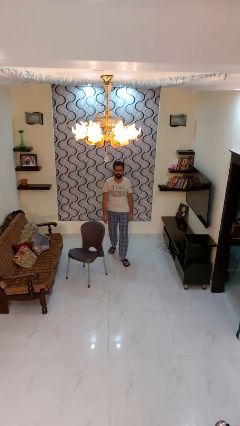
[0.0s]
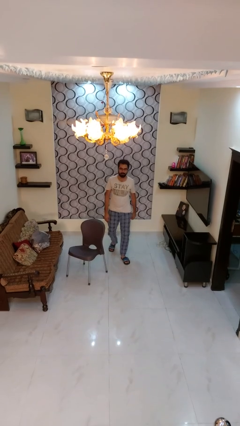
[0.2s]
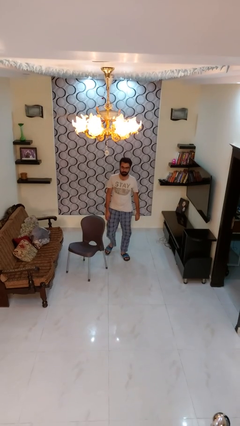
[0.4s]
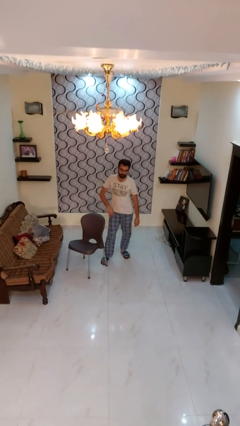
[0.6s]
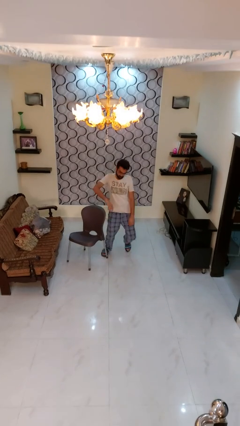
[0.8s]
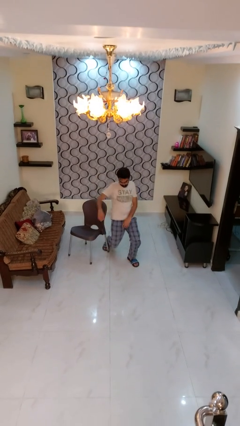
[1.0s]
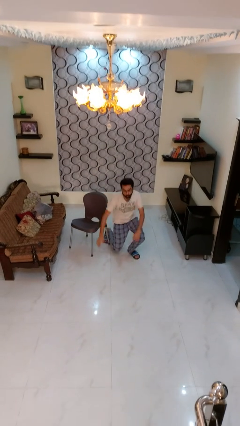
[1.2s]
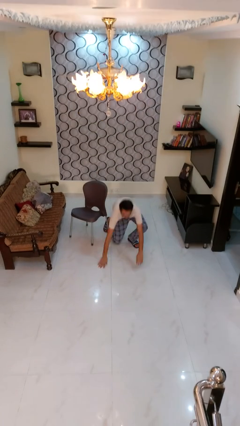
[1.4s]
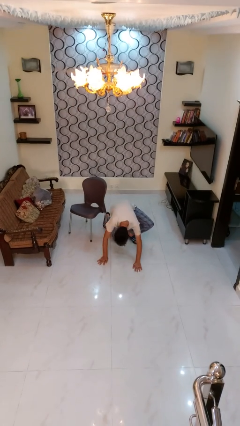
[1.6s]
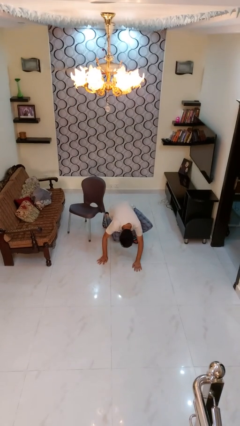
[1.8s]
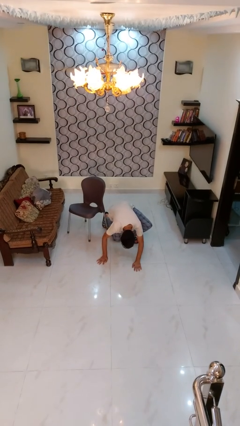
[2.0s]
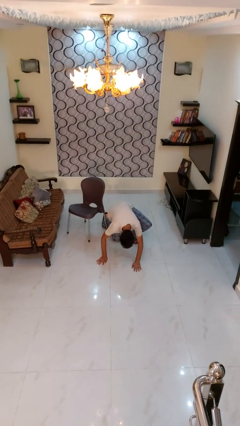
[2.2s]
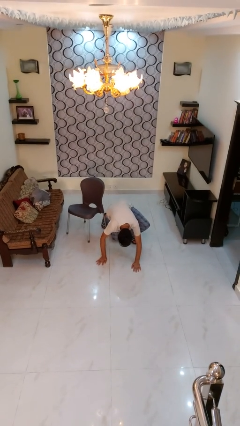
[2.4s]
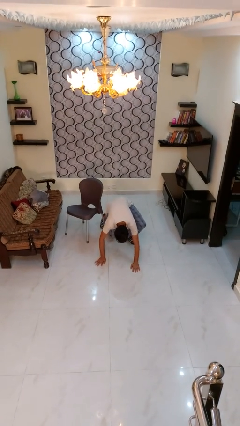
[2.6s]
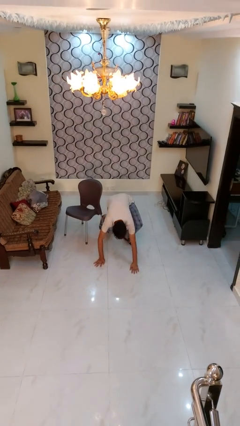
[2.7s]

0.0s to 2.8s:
person trips on object on floor

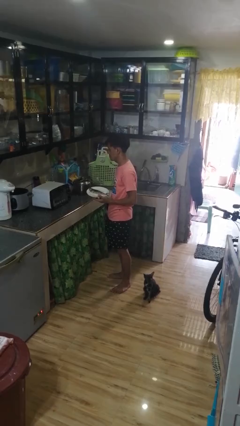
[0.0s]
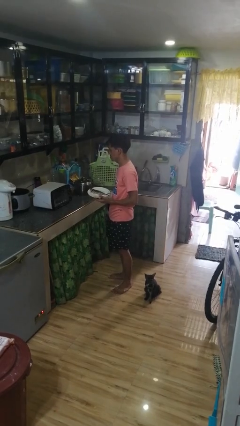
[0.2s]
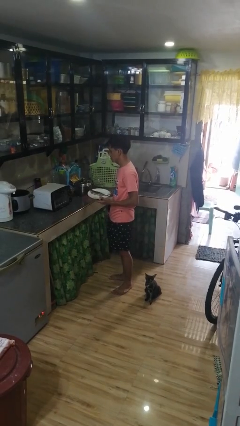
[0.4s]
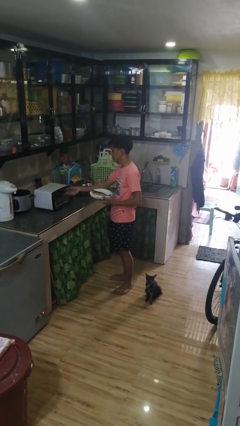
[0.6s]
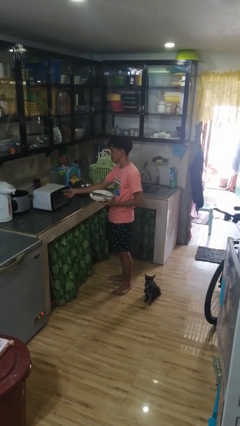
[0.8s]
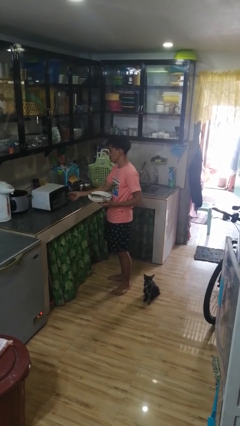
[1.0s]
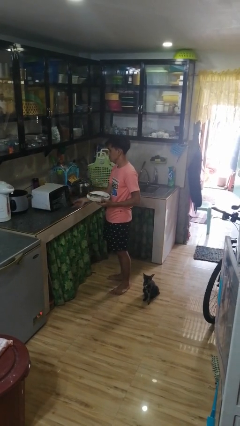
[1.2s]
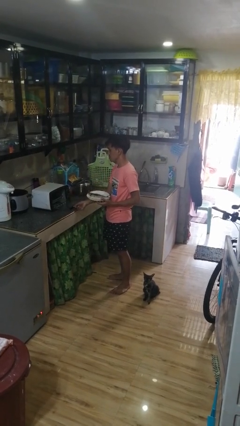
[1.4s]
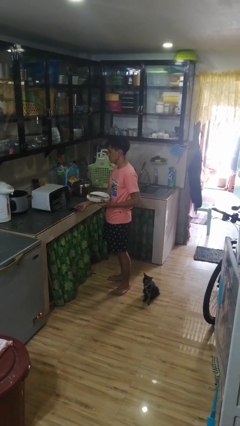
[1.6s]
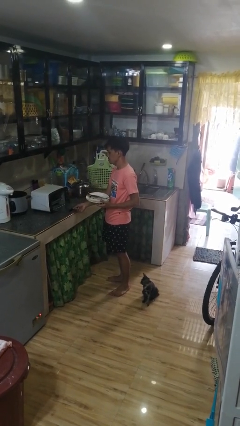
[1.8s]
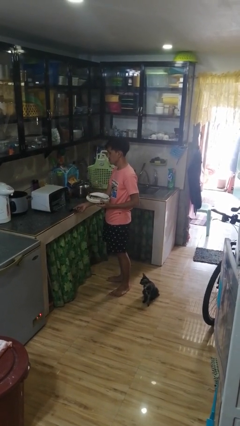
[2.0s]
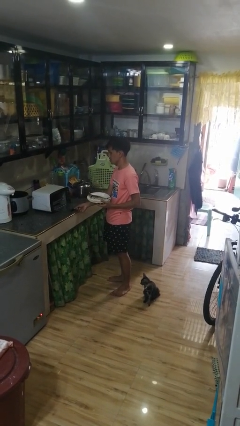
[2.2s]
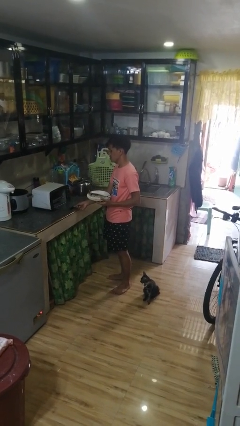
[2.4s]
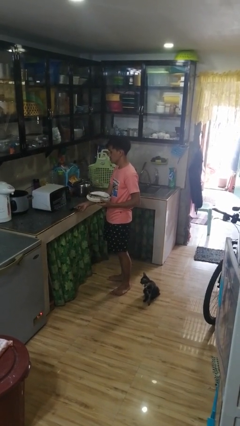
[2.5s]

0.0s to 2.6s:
person opens microwave

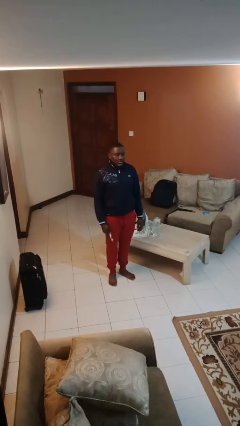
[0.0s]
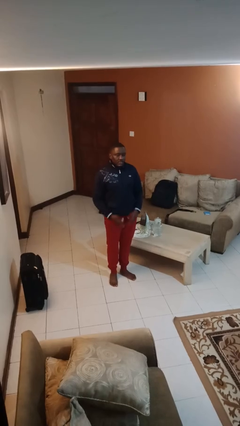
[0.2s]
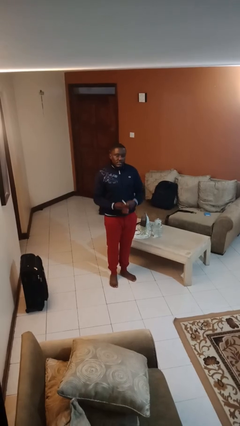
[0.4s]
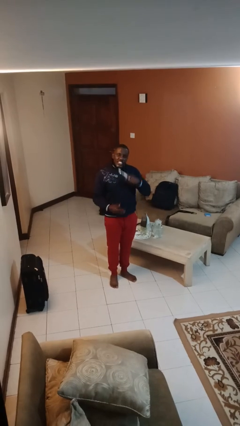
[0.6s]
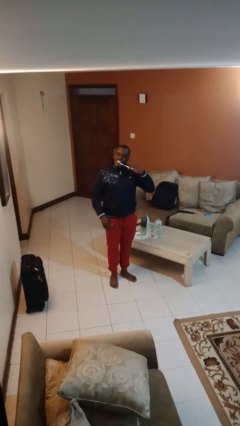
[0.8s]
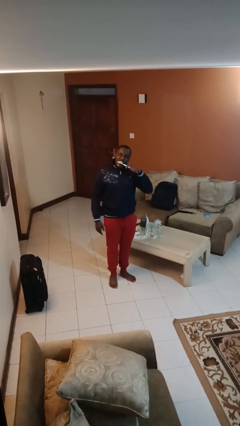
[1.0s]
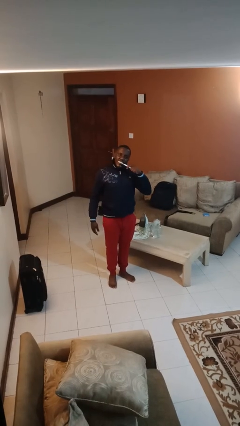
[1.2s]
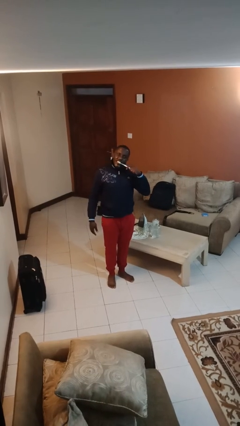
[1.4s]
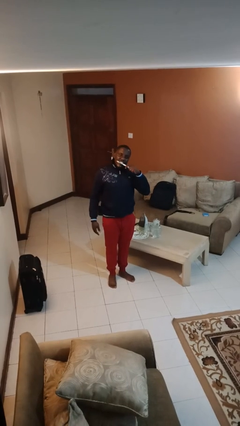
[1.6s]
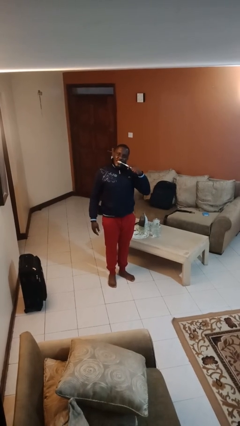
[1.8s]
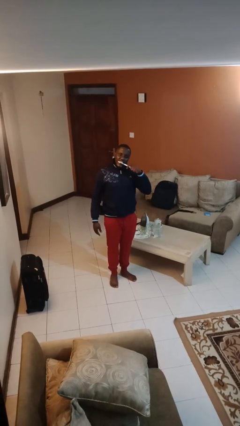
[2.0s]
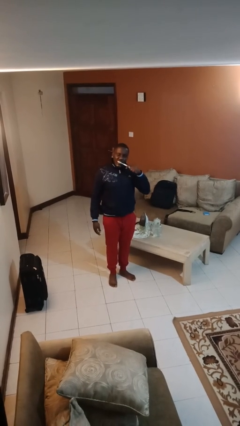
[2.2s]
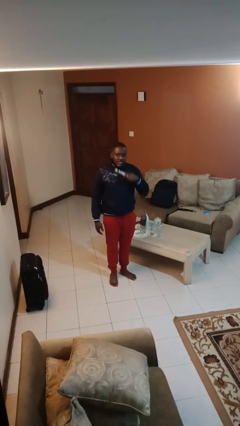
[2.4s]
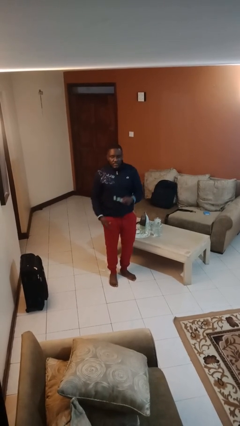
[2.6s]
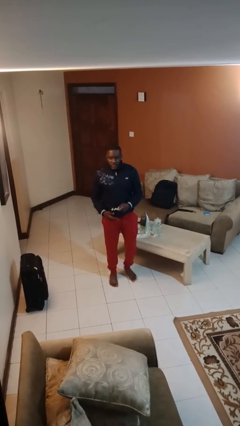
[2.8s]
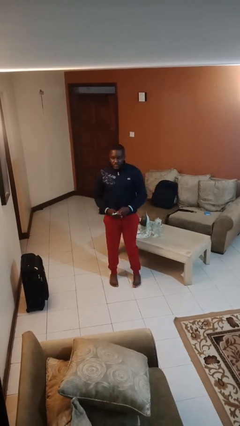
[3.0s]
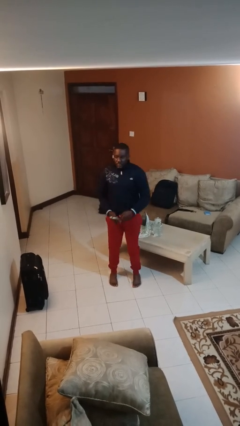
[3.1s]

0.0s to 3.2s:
person brushes teeth

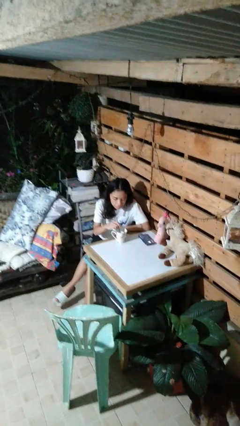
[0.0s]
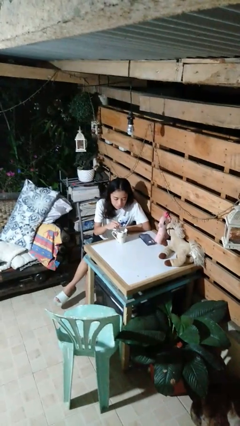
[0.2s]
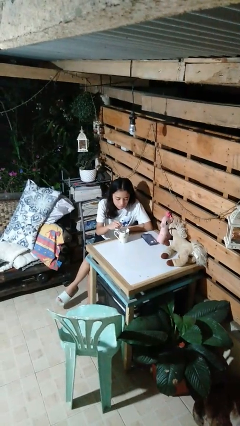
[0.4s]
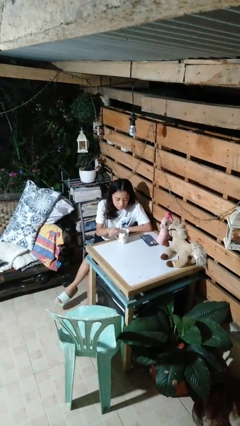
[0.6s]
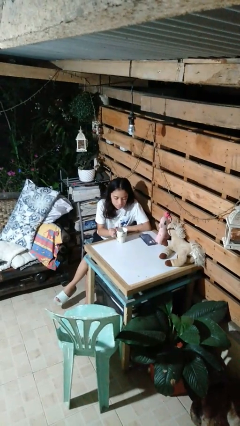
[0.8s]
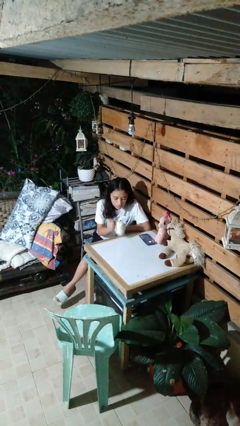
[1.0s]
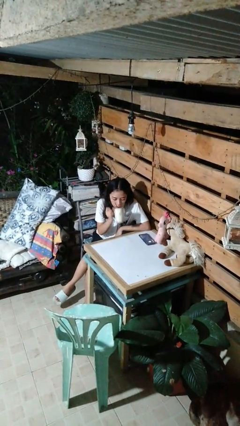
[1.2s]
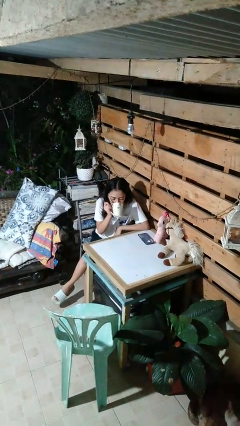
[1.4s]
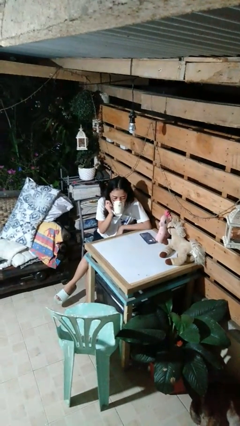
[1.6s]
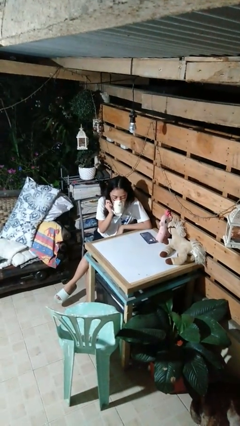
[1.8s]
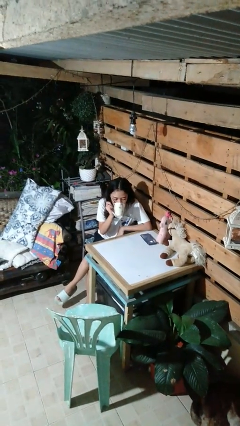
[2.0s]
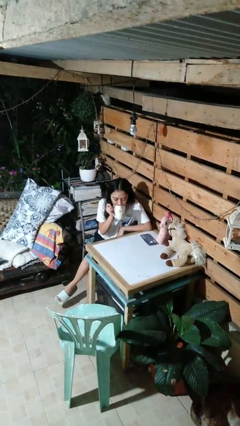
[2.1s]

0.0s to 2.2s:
person drinks from mug

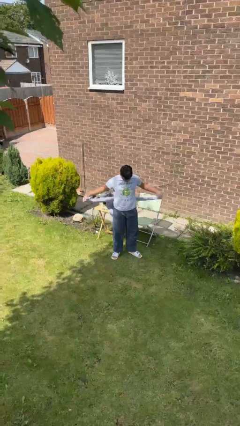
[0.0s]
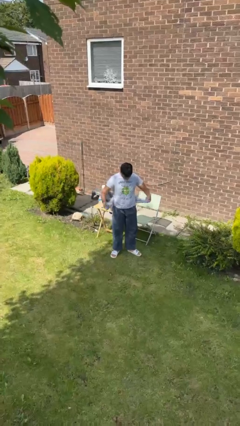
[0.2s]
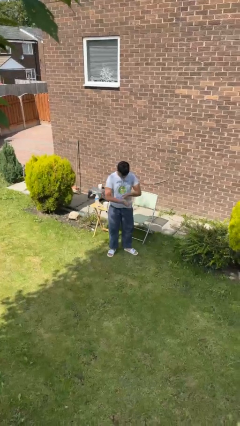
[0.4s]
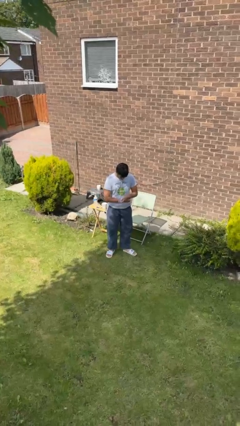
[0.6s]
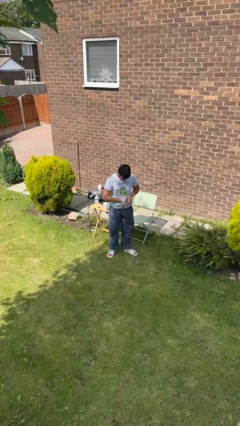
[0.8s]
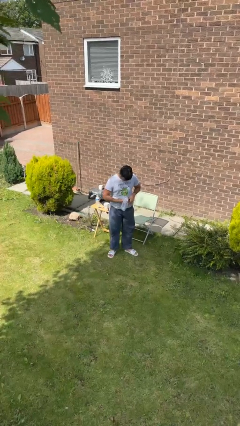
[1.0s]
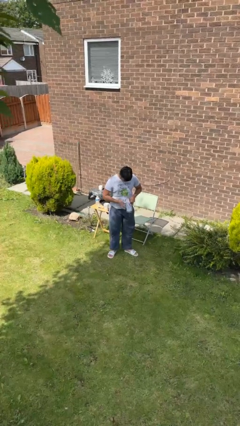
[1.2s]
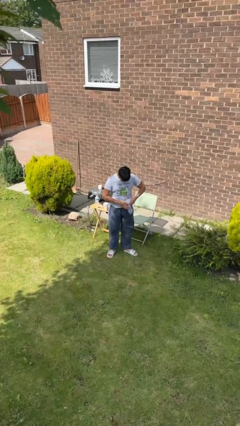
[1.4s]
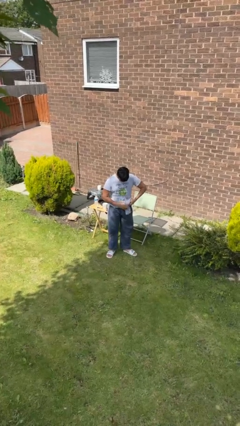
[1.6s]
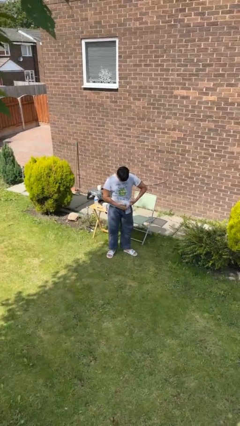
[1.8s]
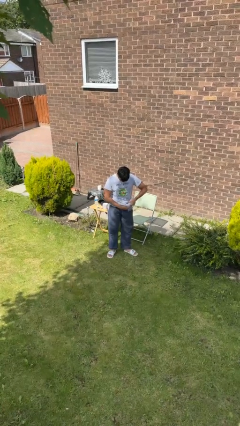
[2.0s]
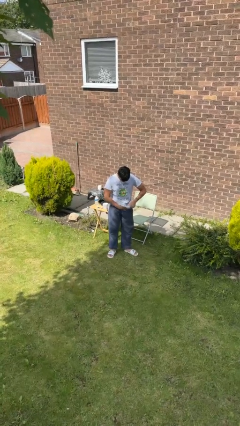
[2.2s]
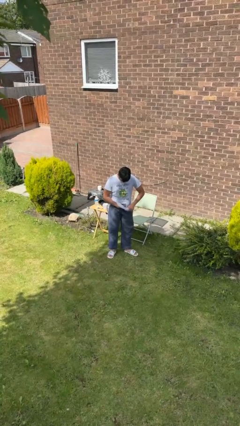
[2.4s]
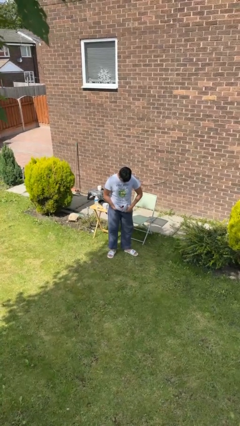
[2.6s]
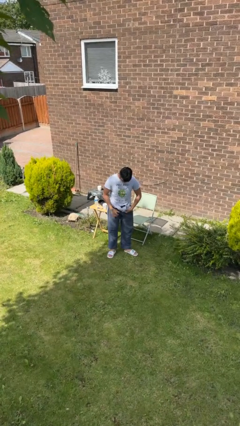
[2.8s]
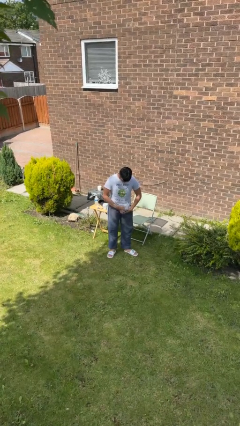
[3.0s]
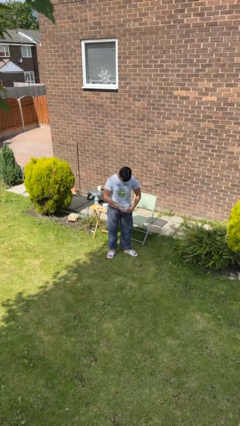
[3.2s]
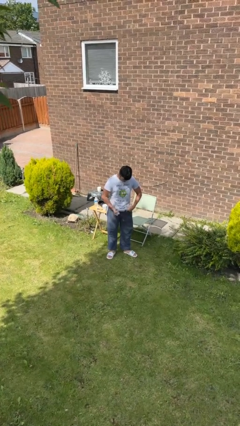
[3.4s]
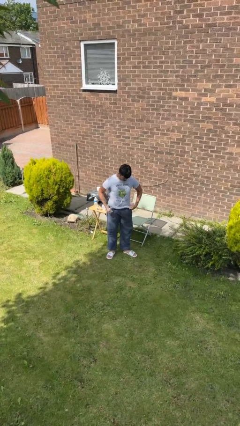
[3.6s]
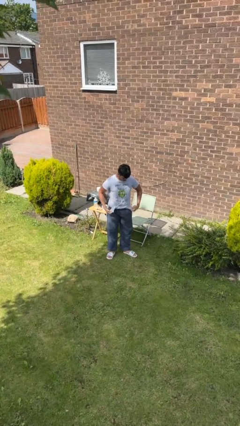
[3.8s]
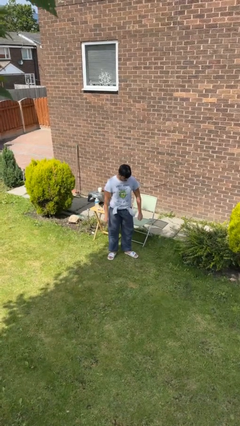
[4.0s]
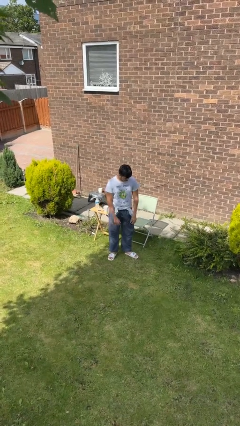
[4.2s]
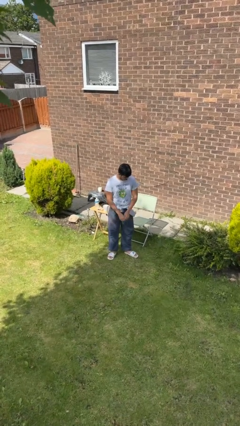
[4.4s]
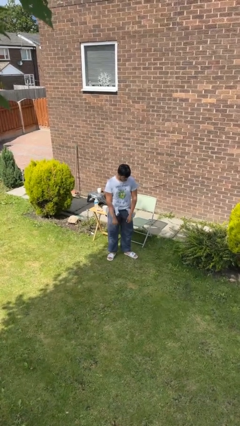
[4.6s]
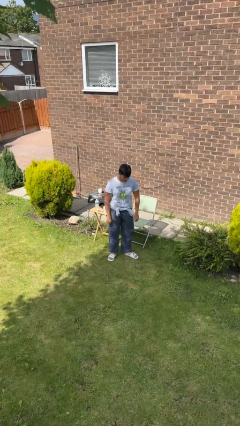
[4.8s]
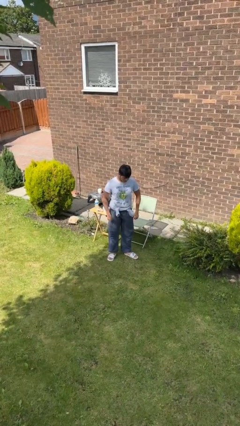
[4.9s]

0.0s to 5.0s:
person ties jacket around waist

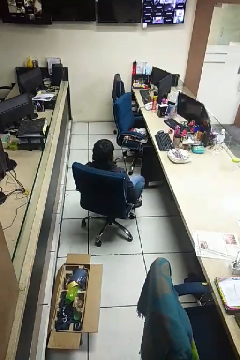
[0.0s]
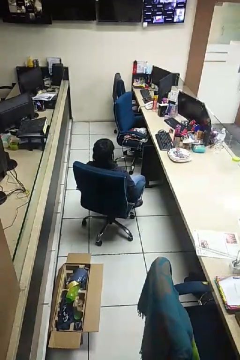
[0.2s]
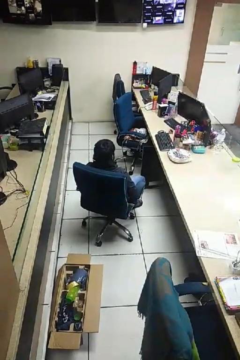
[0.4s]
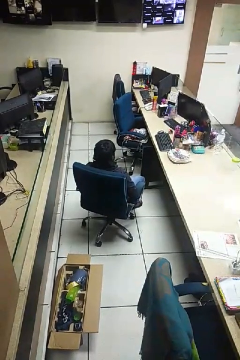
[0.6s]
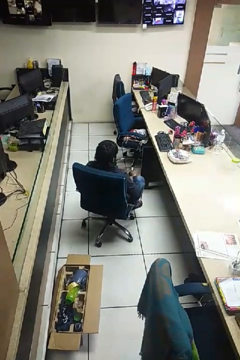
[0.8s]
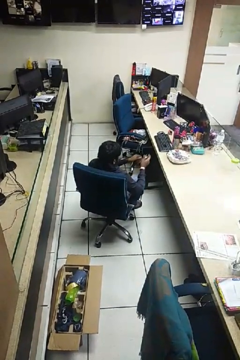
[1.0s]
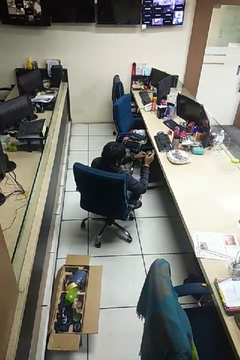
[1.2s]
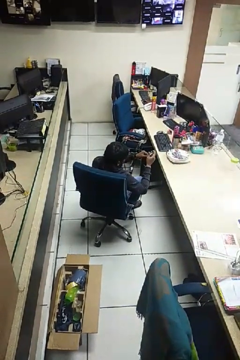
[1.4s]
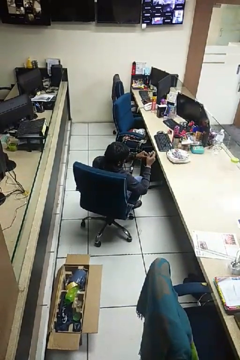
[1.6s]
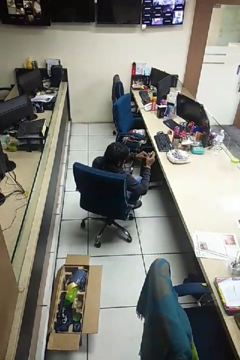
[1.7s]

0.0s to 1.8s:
person clips fingernails

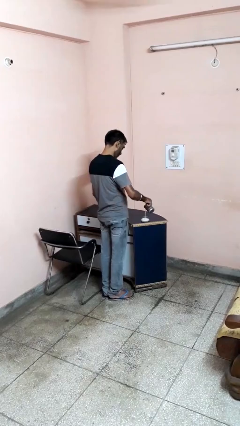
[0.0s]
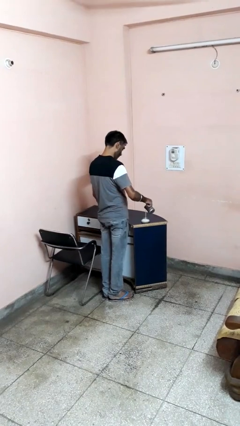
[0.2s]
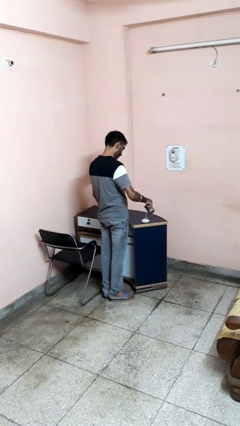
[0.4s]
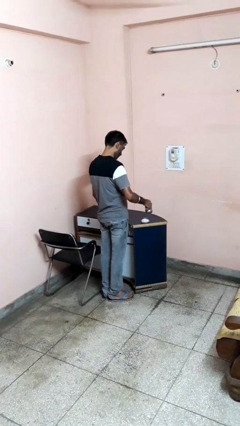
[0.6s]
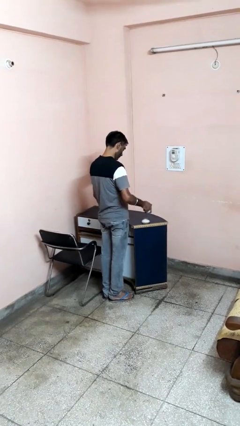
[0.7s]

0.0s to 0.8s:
person pours into bowl
